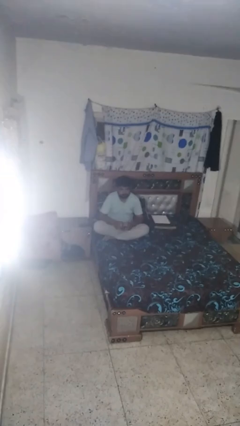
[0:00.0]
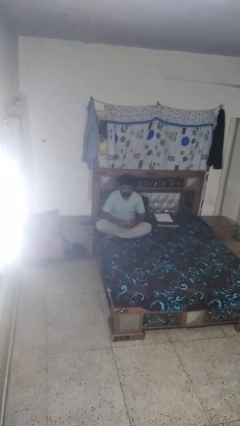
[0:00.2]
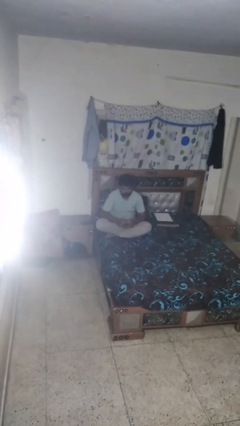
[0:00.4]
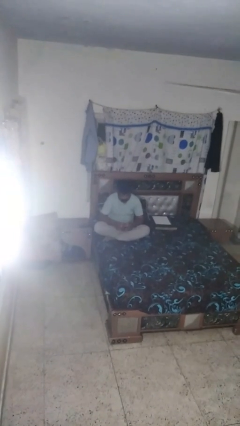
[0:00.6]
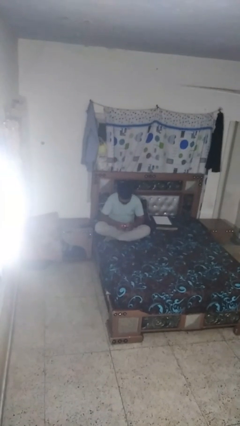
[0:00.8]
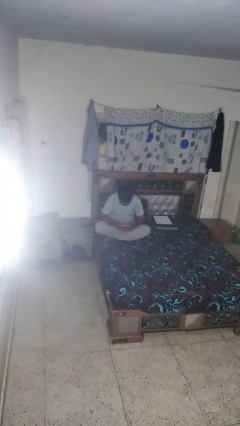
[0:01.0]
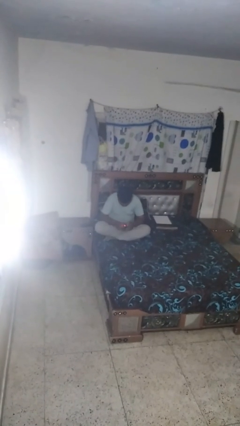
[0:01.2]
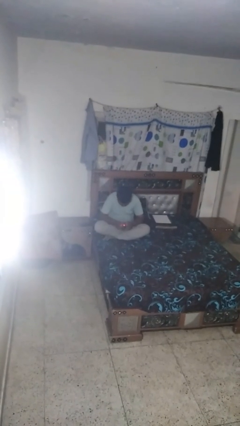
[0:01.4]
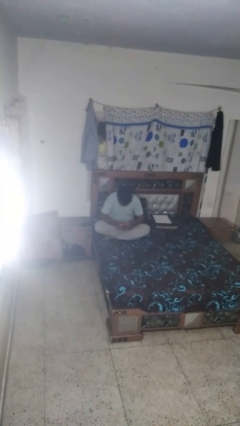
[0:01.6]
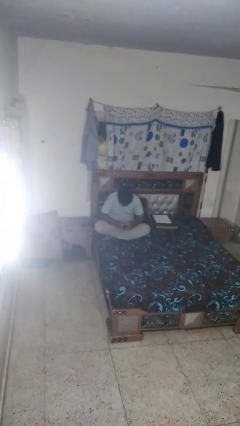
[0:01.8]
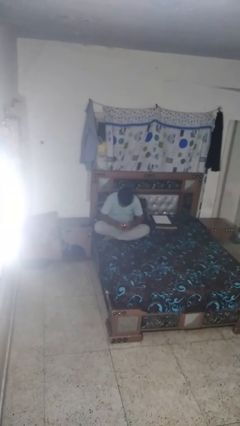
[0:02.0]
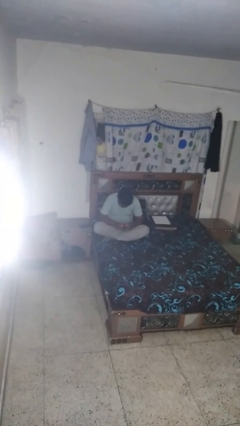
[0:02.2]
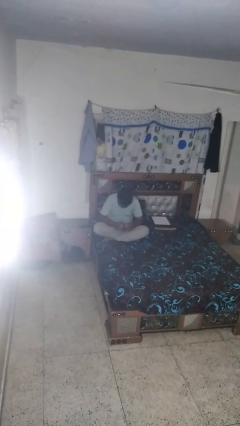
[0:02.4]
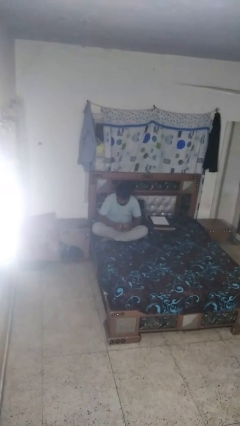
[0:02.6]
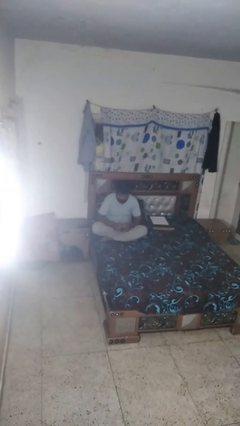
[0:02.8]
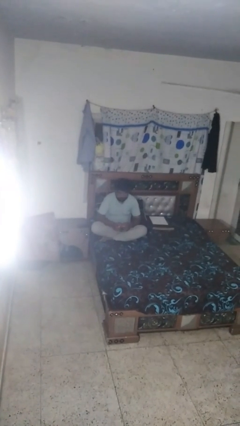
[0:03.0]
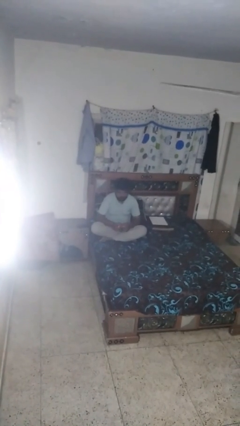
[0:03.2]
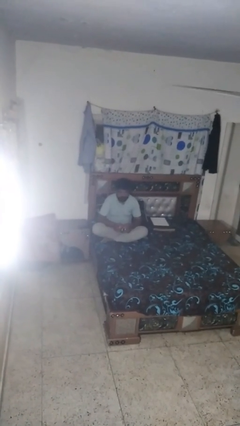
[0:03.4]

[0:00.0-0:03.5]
person interacts with handheld game

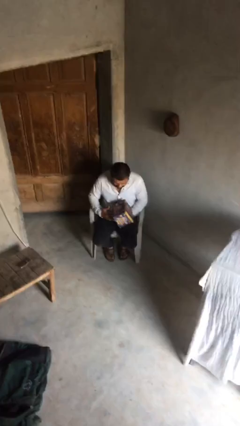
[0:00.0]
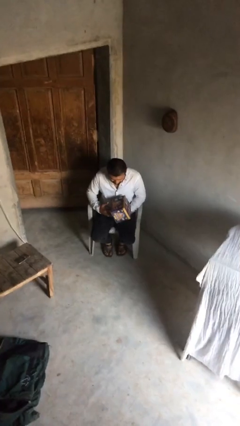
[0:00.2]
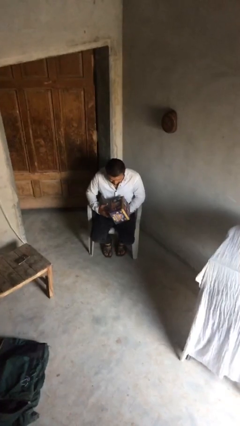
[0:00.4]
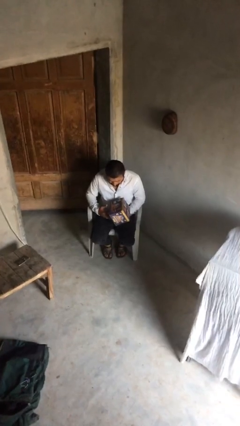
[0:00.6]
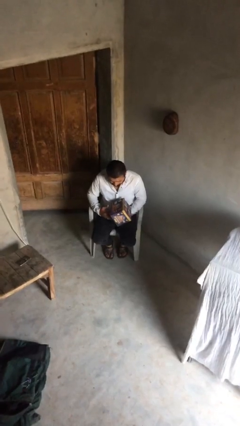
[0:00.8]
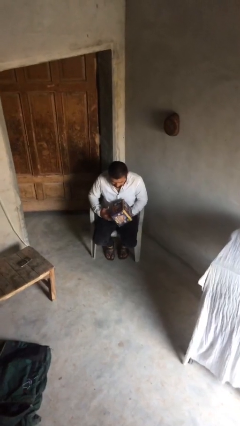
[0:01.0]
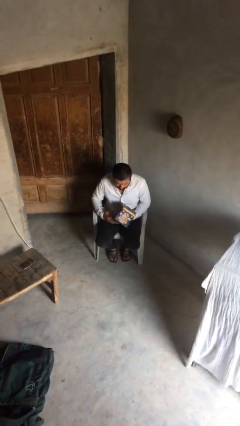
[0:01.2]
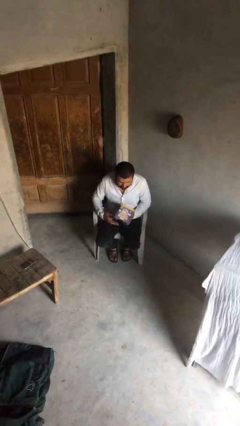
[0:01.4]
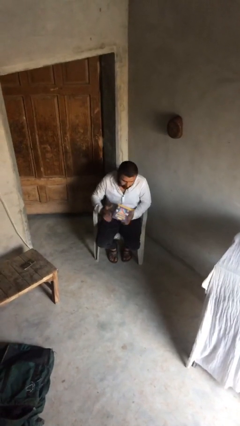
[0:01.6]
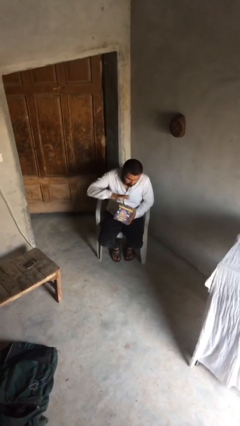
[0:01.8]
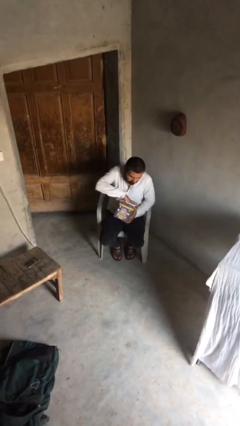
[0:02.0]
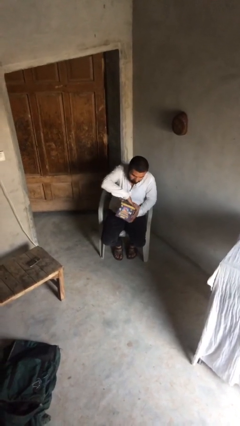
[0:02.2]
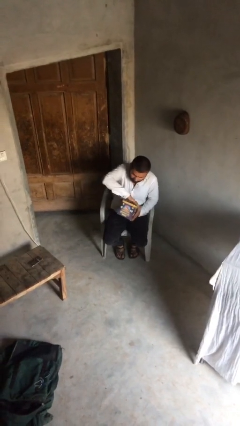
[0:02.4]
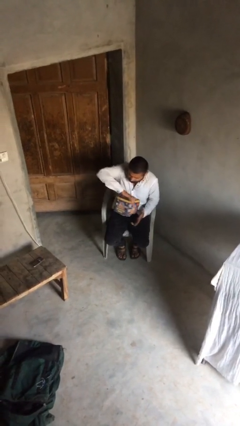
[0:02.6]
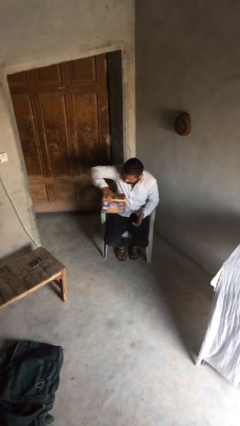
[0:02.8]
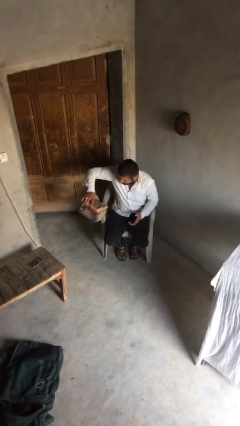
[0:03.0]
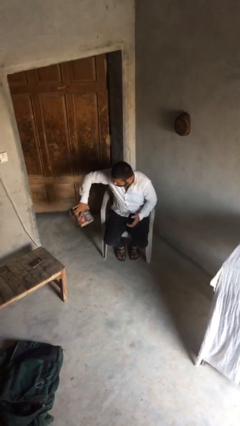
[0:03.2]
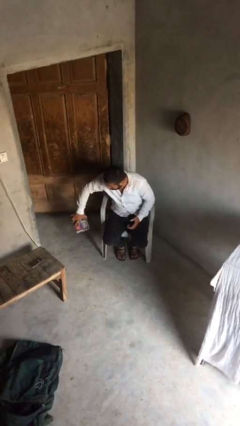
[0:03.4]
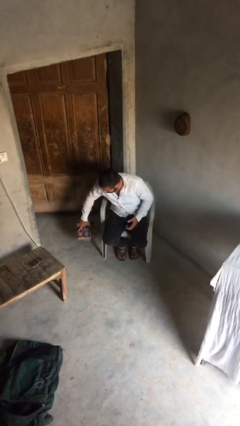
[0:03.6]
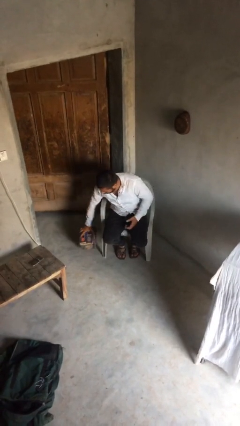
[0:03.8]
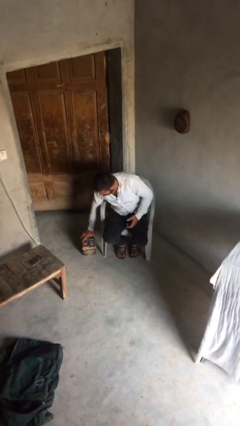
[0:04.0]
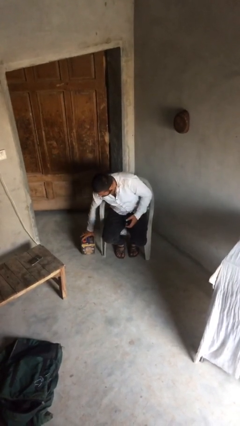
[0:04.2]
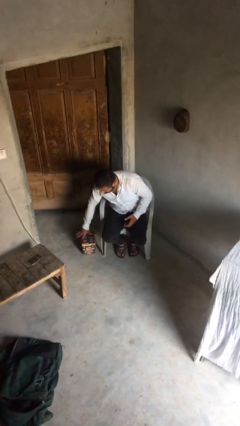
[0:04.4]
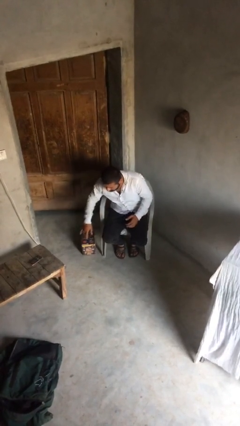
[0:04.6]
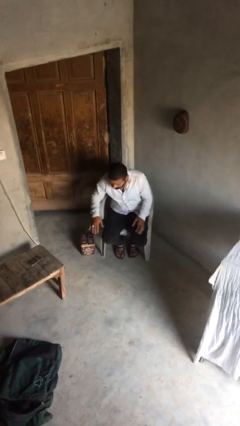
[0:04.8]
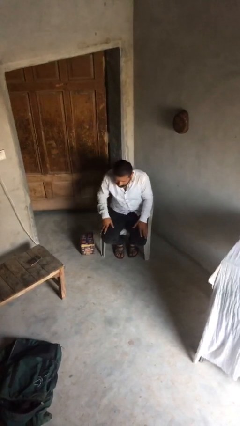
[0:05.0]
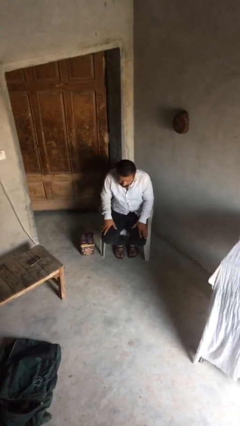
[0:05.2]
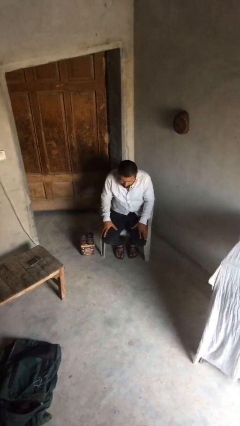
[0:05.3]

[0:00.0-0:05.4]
person puts down object on floor

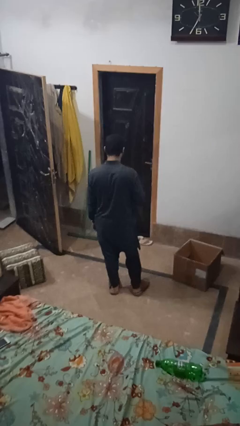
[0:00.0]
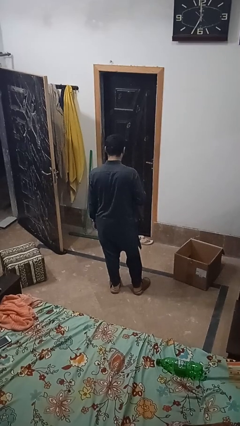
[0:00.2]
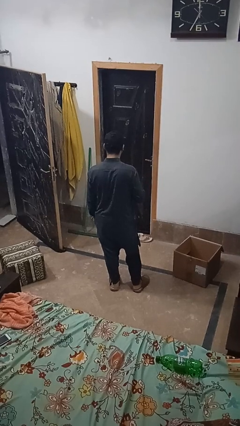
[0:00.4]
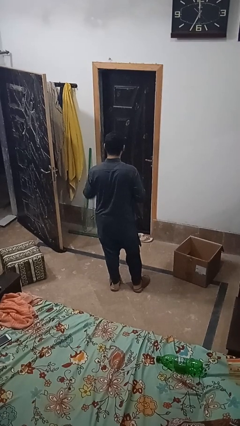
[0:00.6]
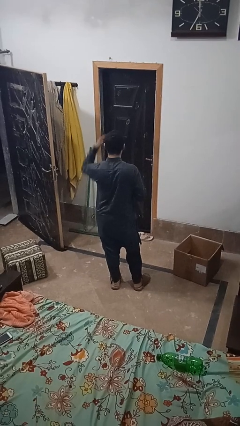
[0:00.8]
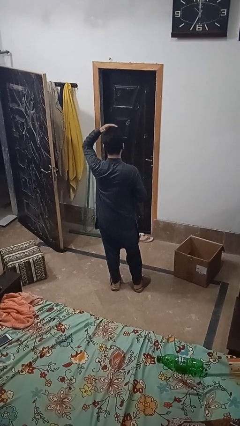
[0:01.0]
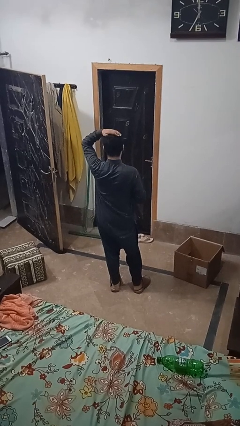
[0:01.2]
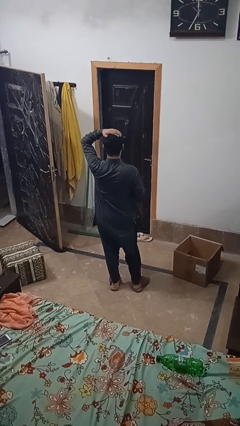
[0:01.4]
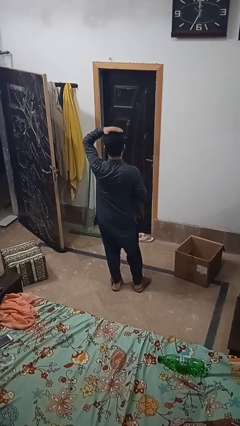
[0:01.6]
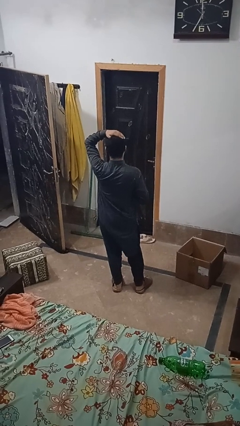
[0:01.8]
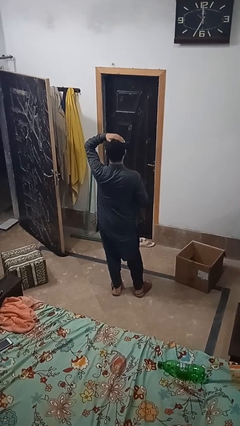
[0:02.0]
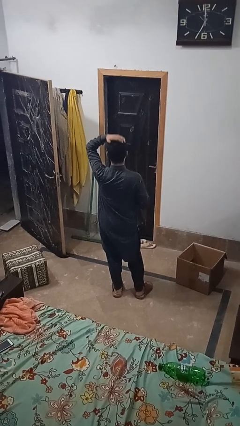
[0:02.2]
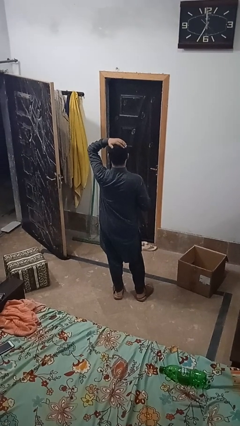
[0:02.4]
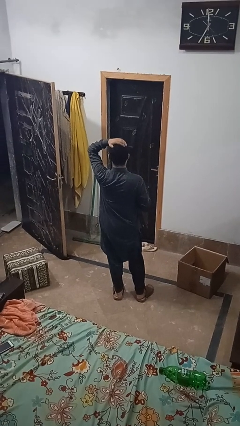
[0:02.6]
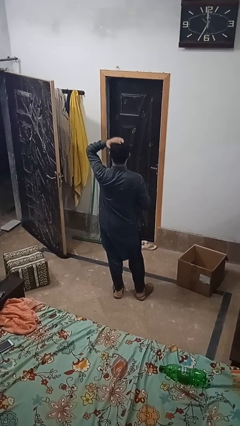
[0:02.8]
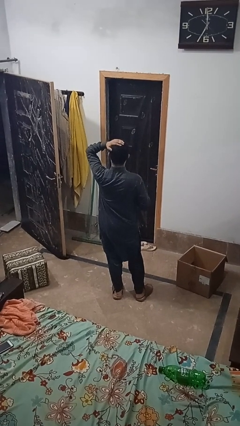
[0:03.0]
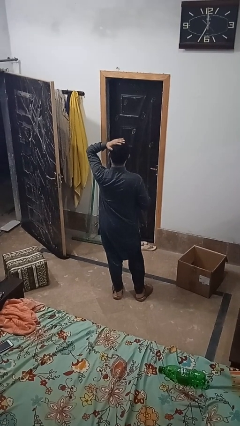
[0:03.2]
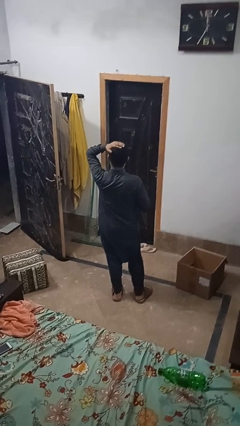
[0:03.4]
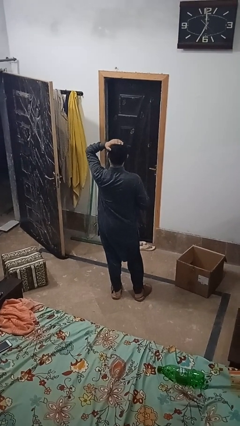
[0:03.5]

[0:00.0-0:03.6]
person pats head

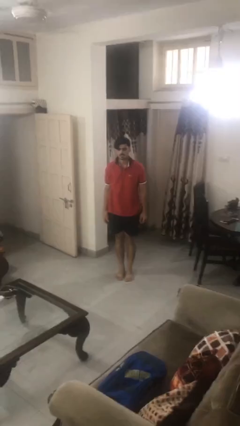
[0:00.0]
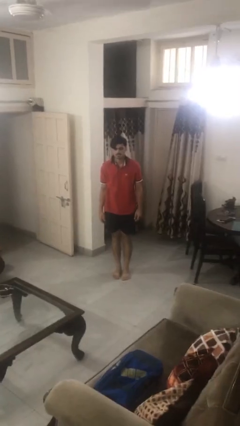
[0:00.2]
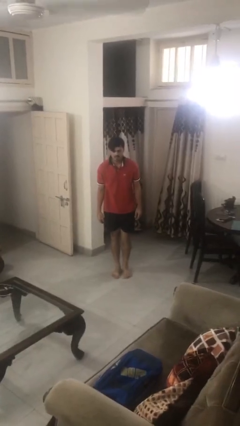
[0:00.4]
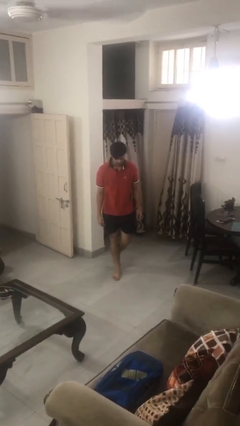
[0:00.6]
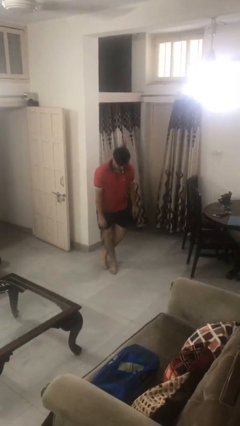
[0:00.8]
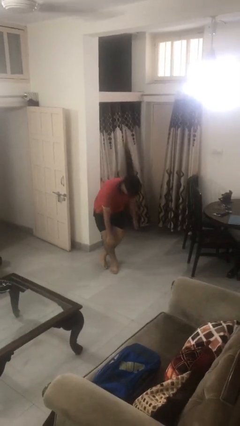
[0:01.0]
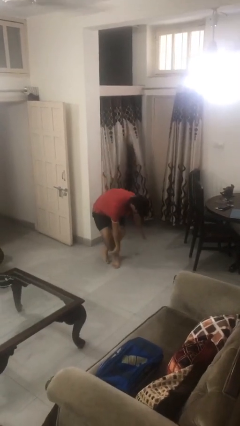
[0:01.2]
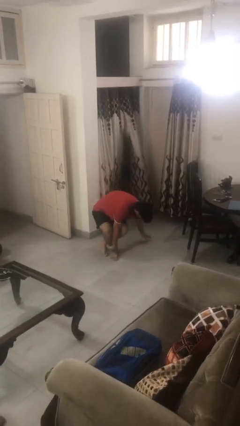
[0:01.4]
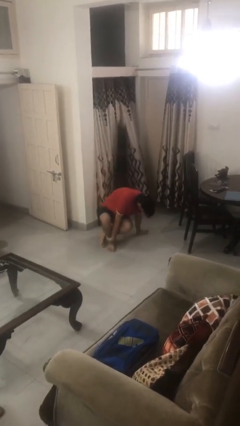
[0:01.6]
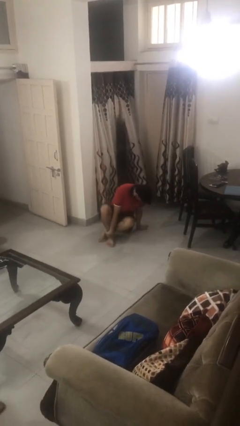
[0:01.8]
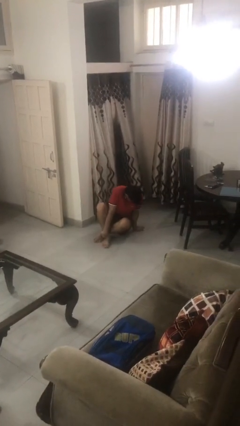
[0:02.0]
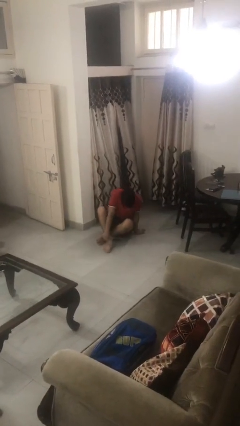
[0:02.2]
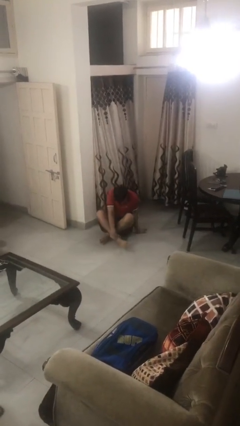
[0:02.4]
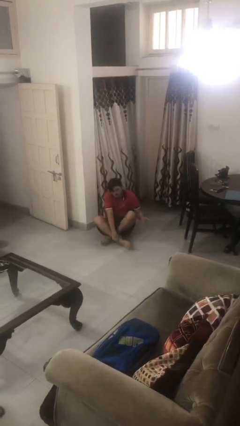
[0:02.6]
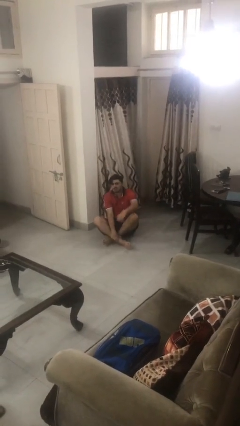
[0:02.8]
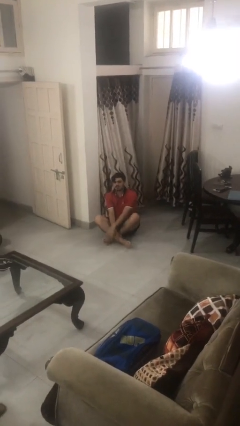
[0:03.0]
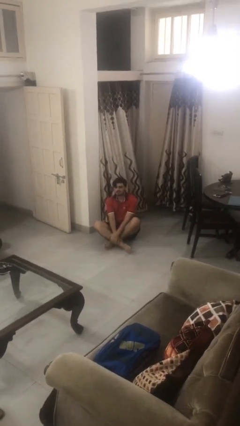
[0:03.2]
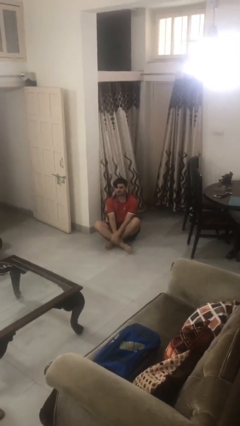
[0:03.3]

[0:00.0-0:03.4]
person sits crisscross

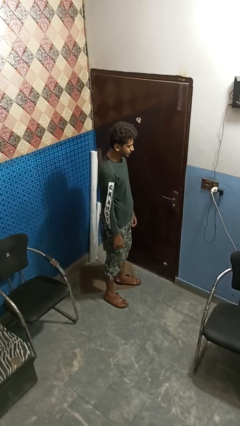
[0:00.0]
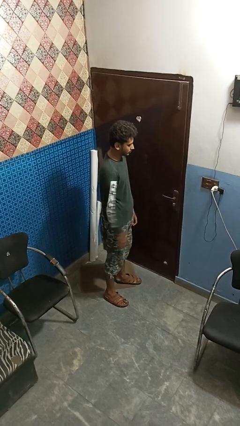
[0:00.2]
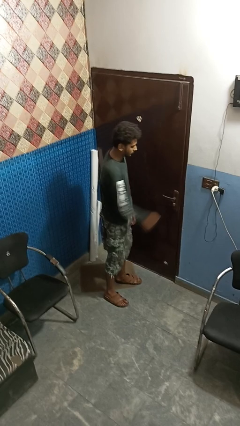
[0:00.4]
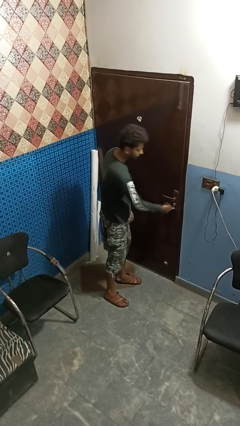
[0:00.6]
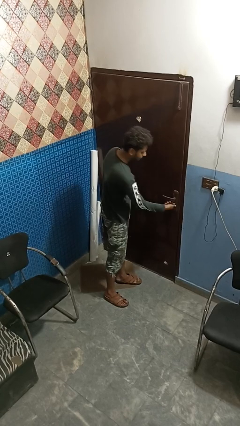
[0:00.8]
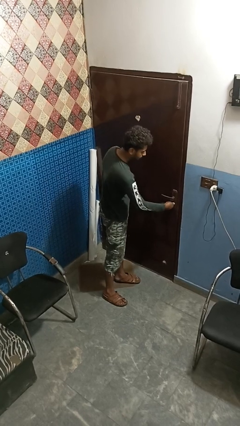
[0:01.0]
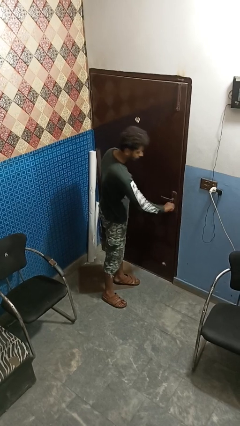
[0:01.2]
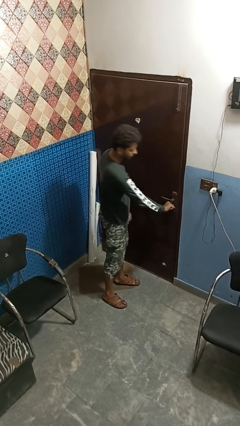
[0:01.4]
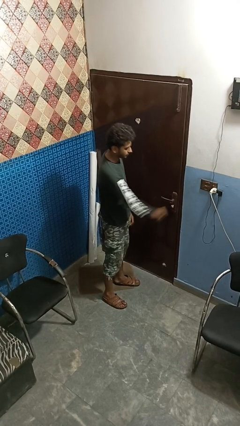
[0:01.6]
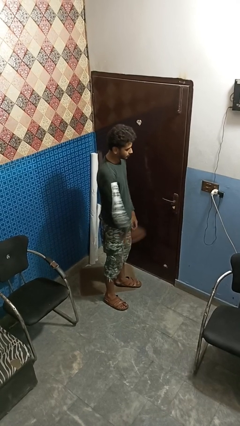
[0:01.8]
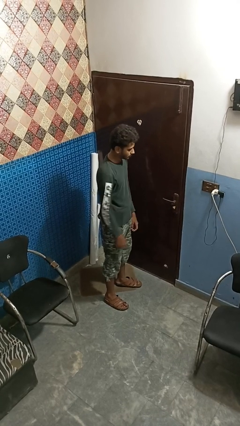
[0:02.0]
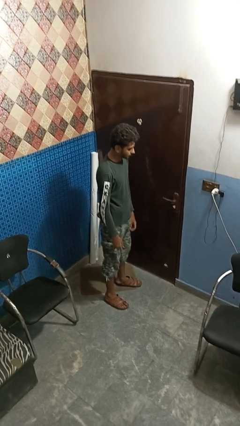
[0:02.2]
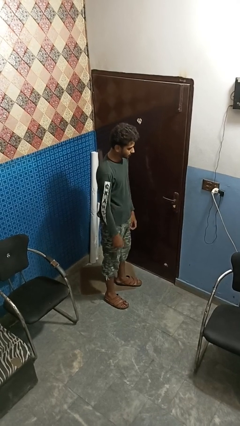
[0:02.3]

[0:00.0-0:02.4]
person unlocks door with keys
